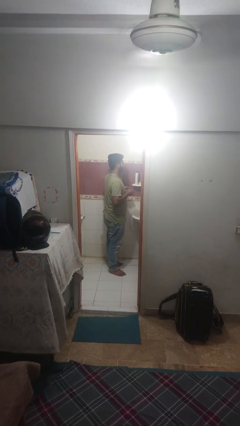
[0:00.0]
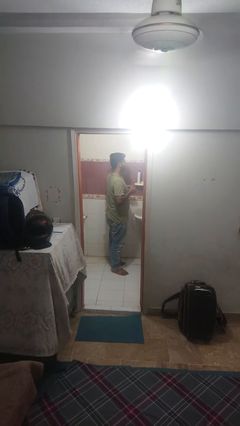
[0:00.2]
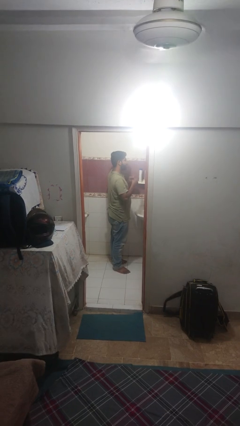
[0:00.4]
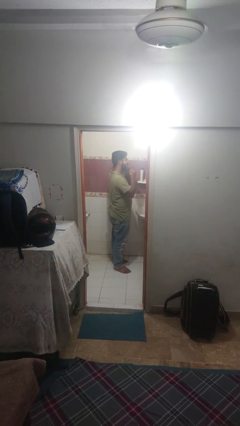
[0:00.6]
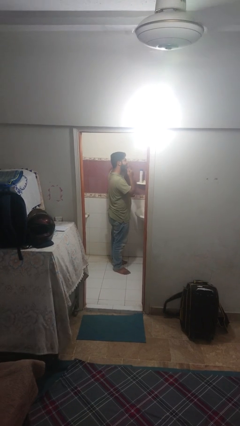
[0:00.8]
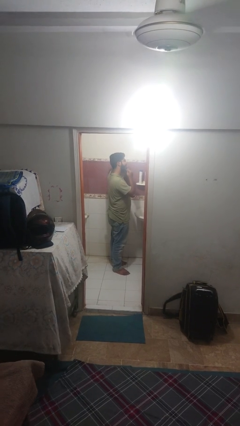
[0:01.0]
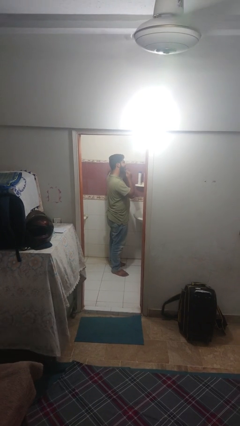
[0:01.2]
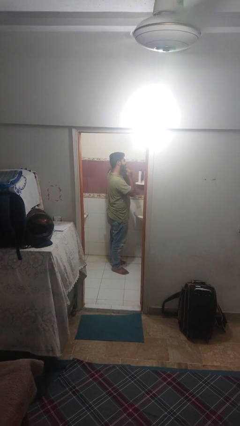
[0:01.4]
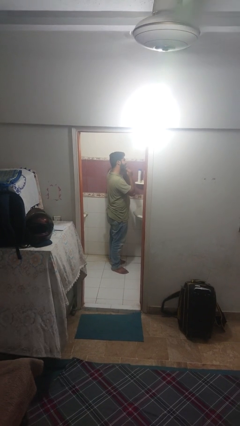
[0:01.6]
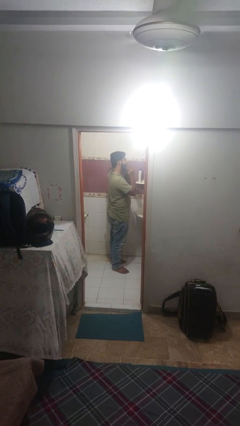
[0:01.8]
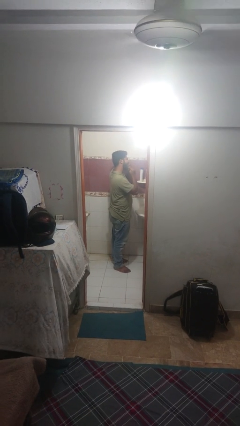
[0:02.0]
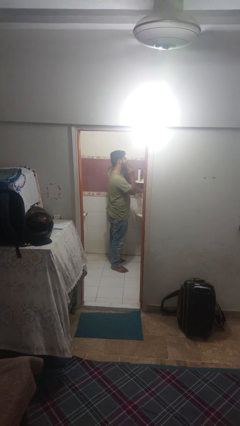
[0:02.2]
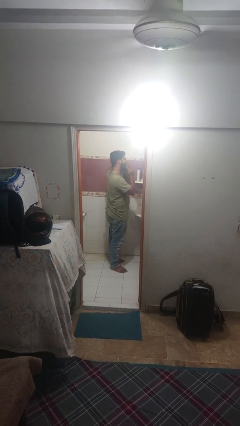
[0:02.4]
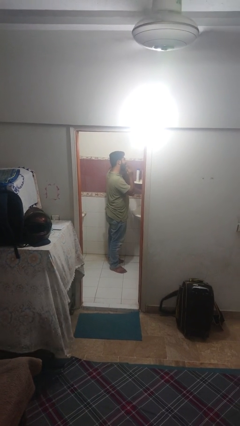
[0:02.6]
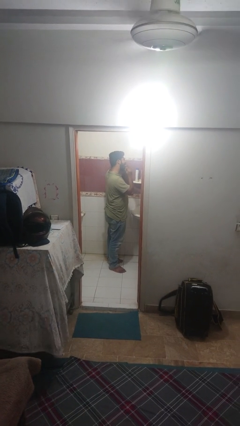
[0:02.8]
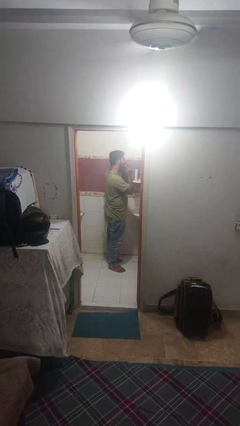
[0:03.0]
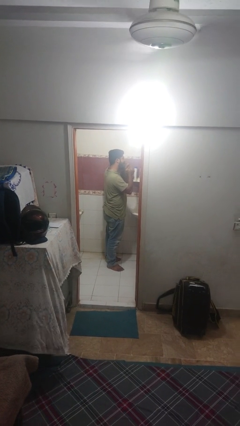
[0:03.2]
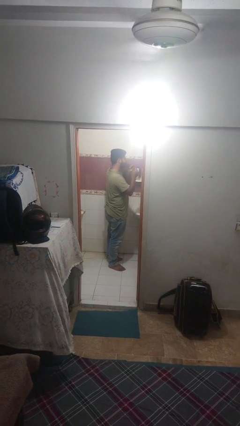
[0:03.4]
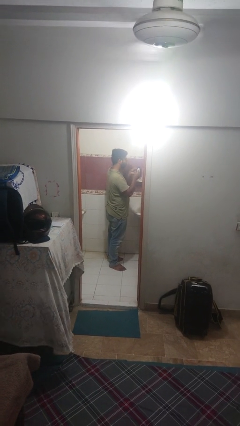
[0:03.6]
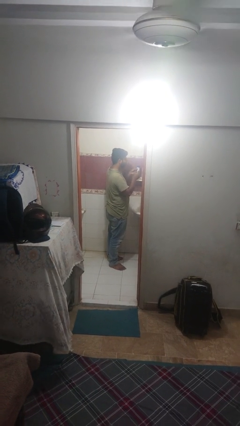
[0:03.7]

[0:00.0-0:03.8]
person flosses

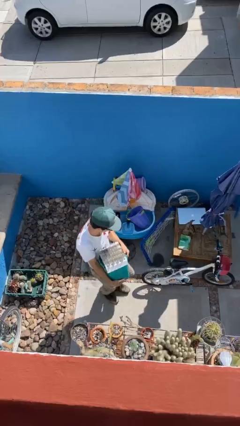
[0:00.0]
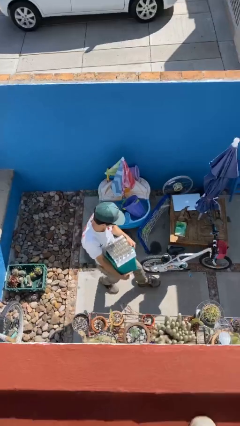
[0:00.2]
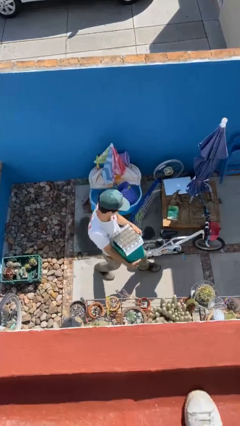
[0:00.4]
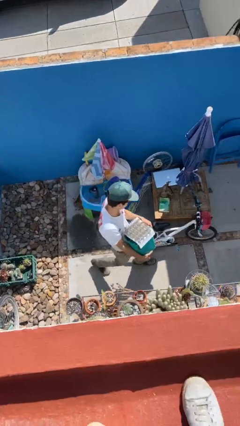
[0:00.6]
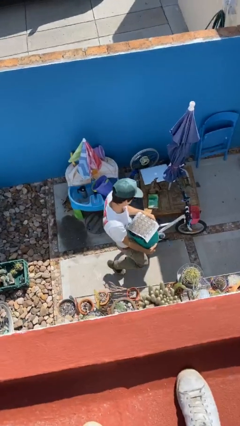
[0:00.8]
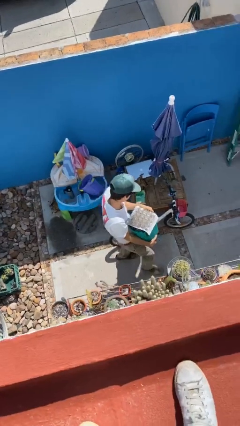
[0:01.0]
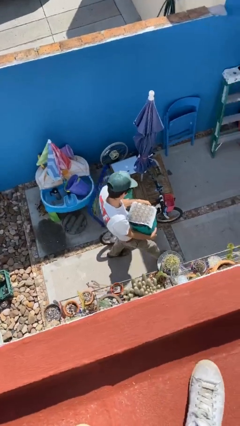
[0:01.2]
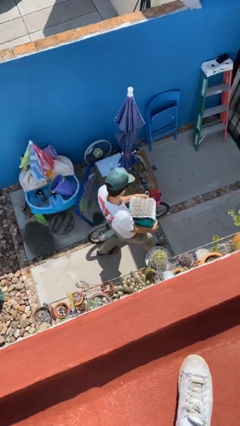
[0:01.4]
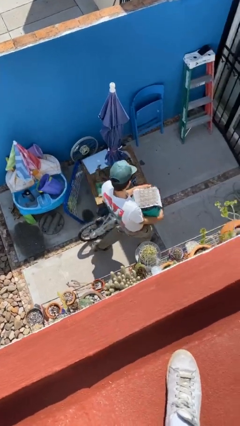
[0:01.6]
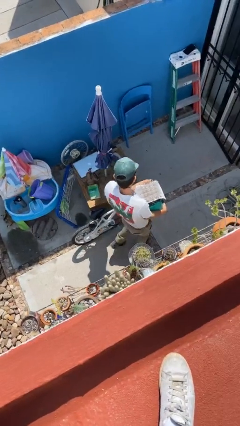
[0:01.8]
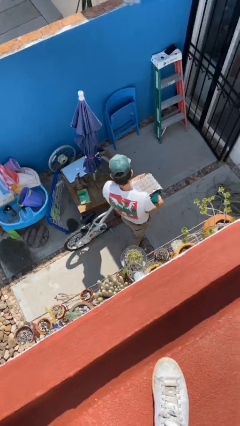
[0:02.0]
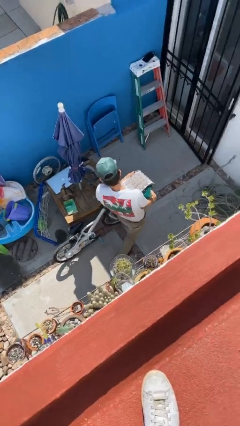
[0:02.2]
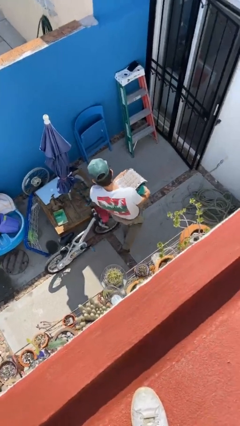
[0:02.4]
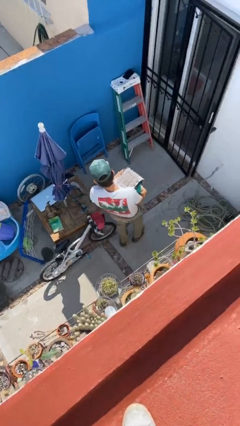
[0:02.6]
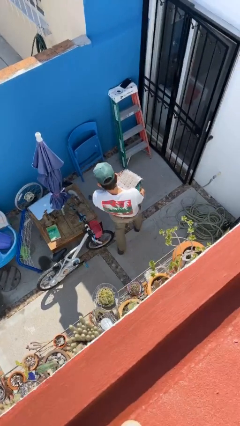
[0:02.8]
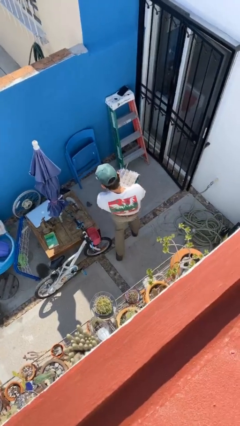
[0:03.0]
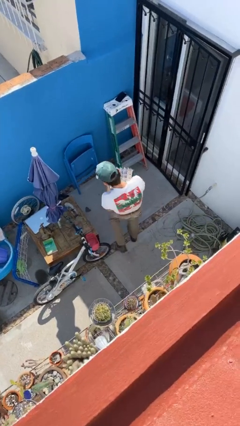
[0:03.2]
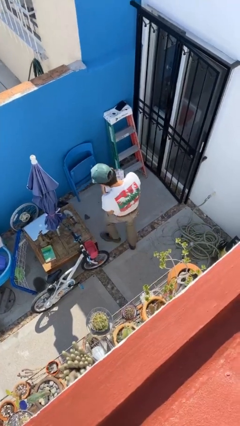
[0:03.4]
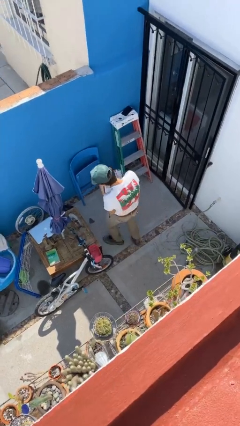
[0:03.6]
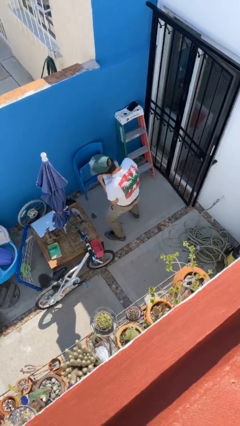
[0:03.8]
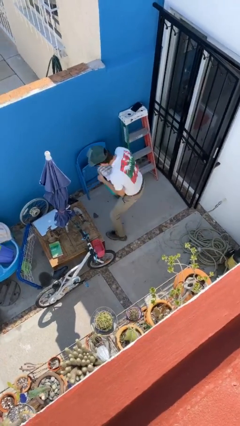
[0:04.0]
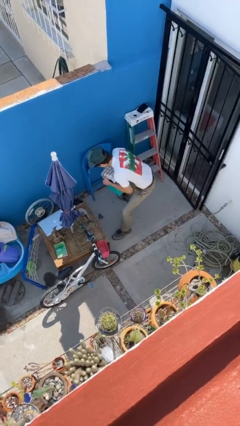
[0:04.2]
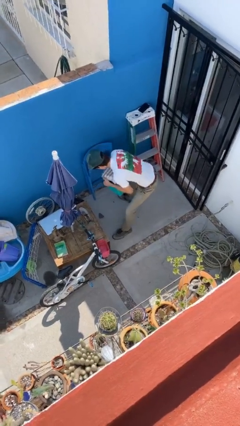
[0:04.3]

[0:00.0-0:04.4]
person carries heavy object

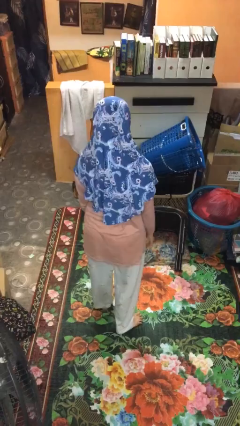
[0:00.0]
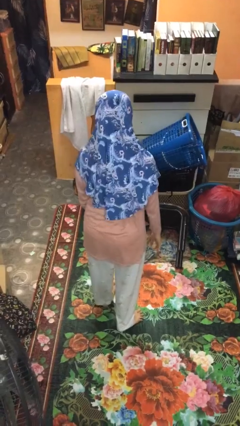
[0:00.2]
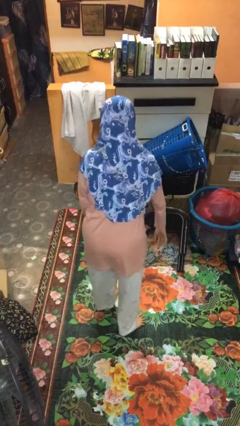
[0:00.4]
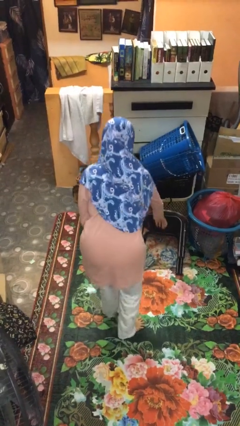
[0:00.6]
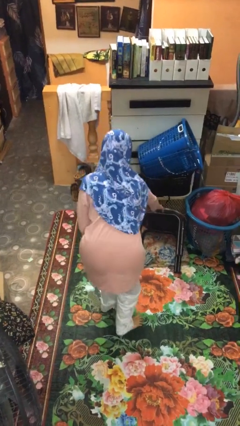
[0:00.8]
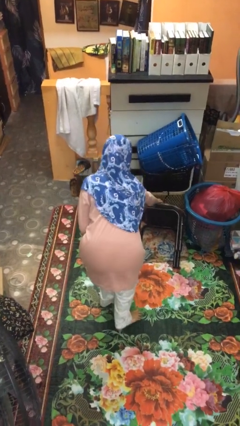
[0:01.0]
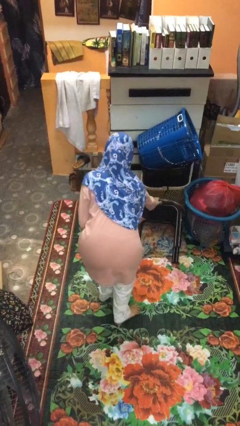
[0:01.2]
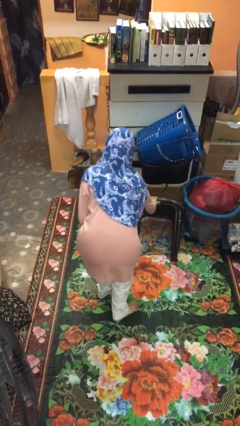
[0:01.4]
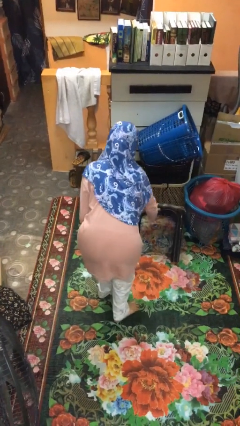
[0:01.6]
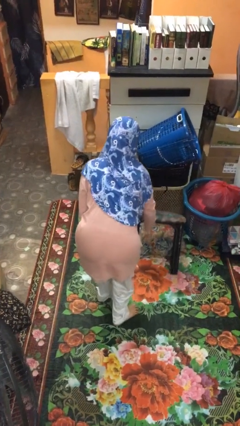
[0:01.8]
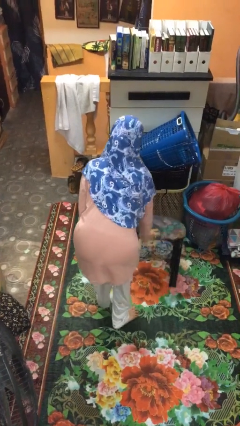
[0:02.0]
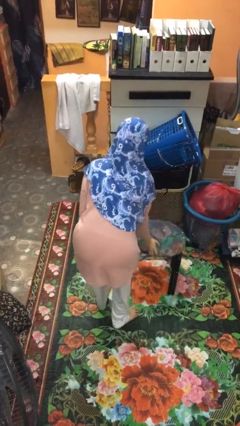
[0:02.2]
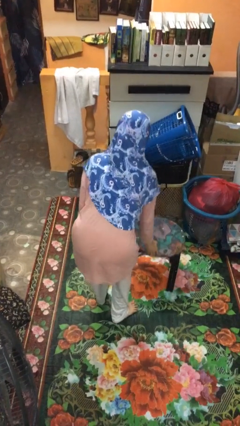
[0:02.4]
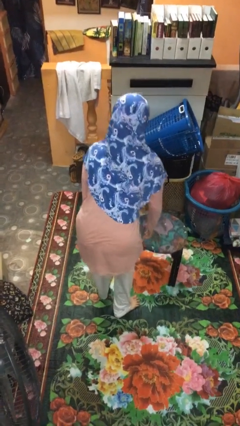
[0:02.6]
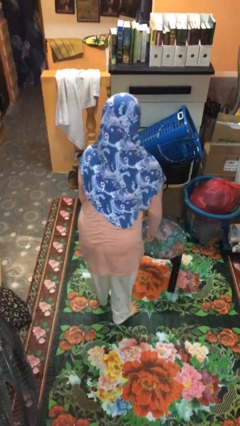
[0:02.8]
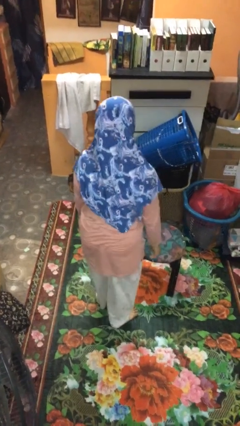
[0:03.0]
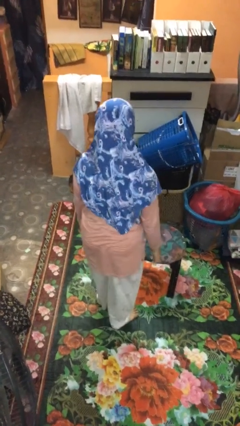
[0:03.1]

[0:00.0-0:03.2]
person sets upright furniture

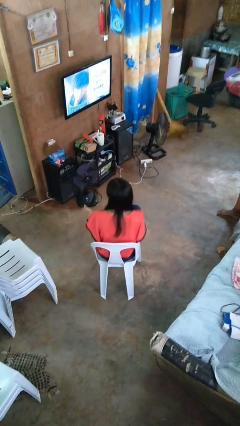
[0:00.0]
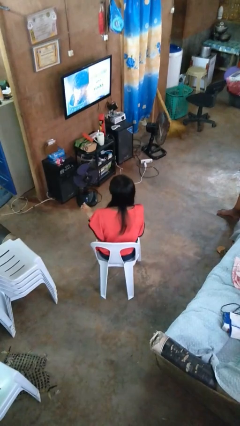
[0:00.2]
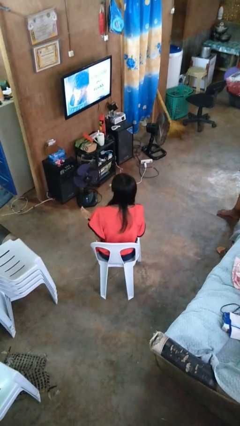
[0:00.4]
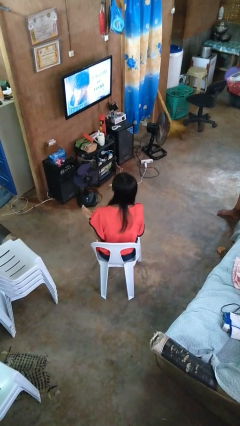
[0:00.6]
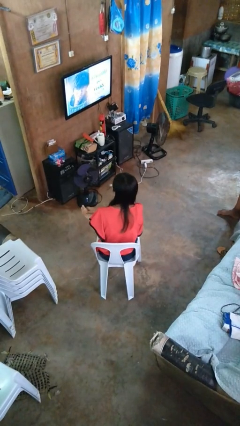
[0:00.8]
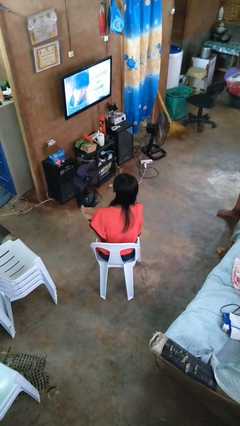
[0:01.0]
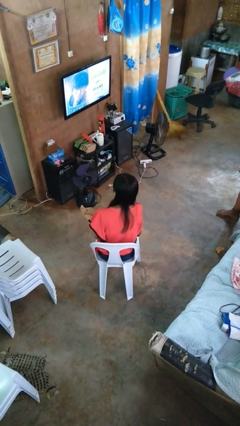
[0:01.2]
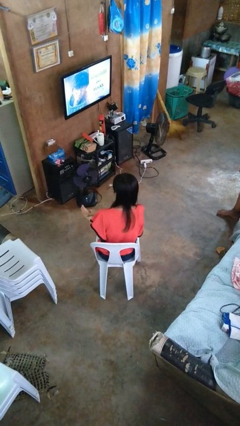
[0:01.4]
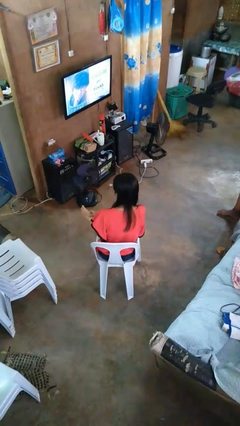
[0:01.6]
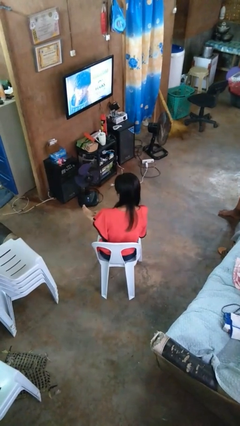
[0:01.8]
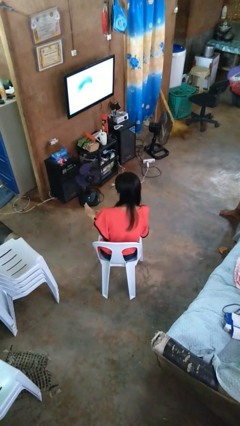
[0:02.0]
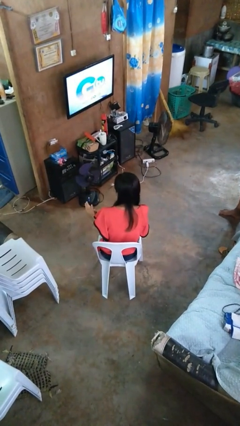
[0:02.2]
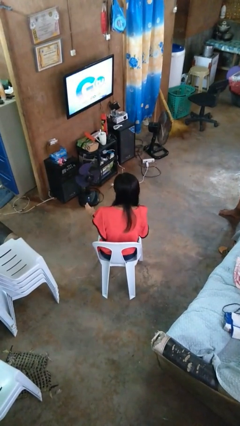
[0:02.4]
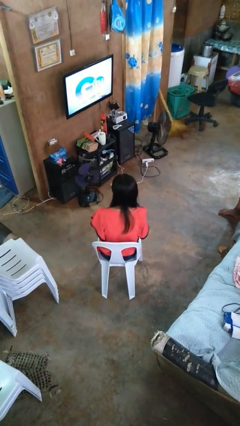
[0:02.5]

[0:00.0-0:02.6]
person rubs foot

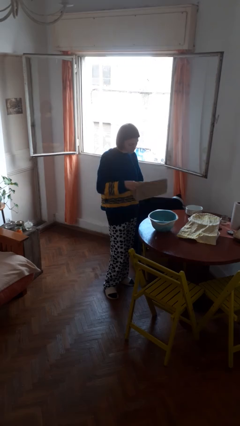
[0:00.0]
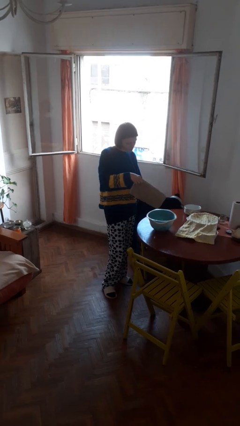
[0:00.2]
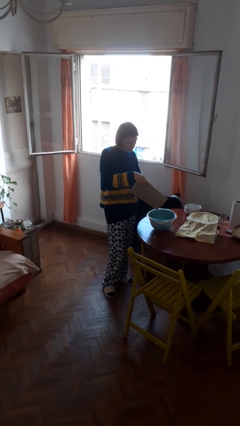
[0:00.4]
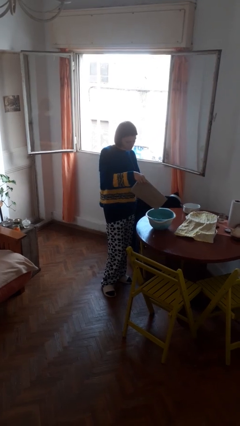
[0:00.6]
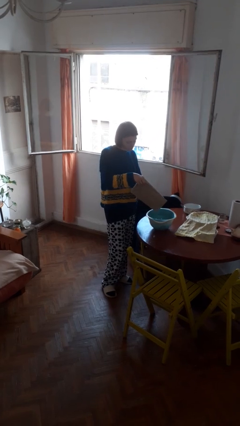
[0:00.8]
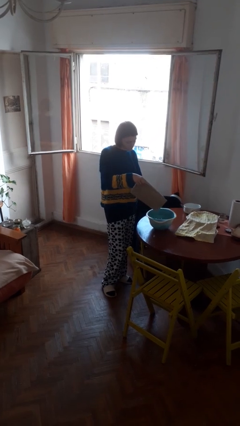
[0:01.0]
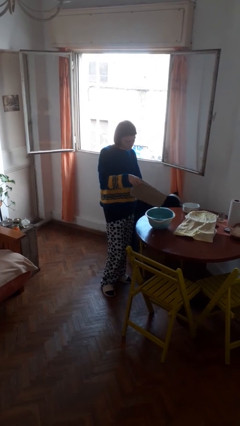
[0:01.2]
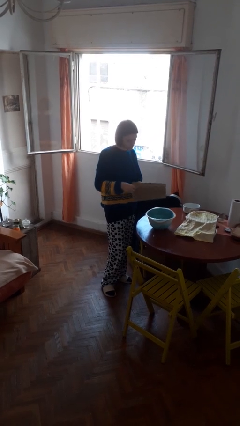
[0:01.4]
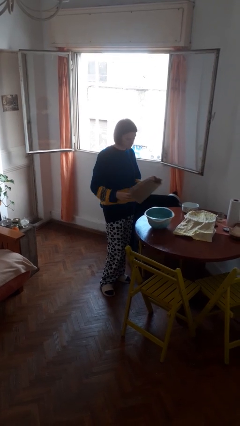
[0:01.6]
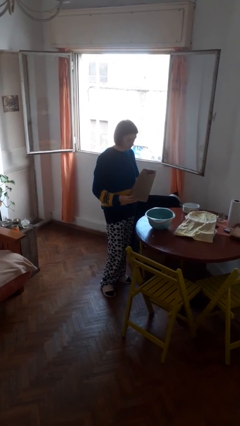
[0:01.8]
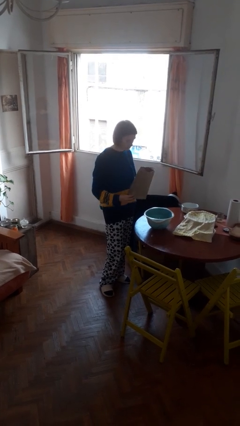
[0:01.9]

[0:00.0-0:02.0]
person pours into bowl

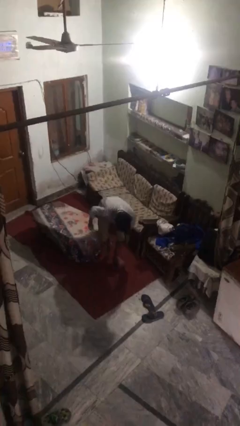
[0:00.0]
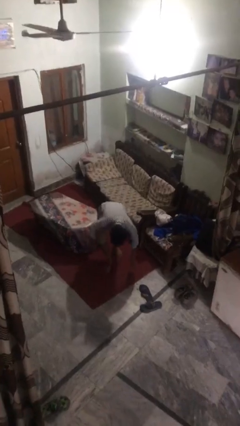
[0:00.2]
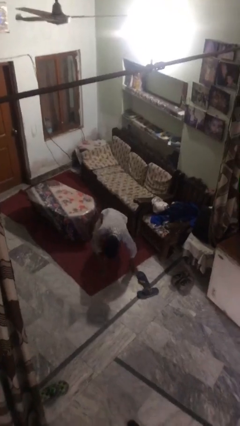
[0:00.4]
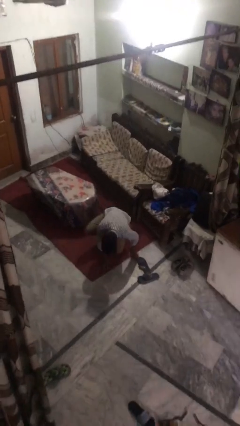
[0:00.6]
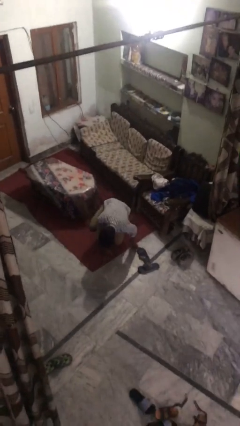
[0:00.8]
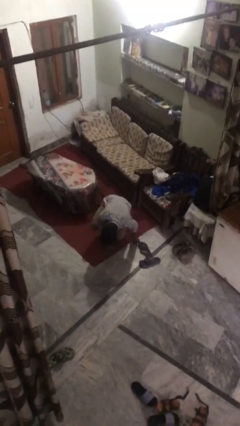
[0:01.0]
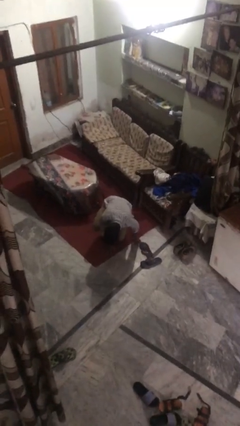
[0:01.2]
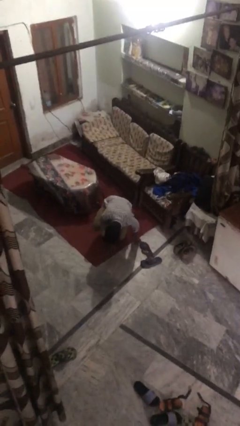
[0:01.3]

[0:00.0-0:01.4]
person lies down on floor
